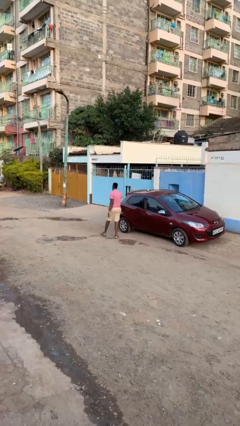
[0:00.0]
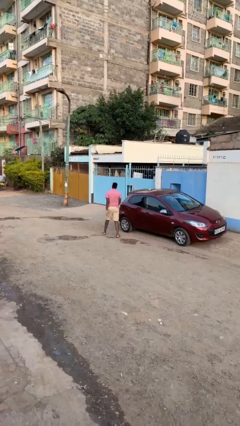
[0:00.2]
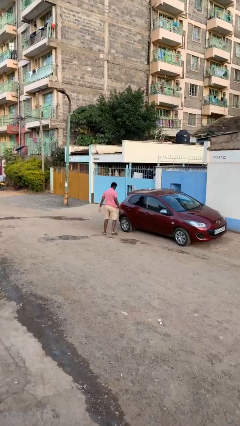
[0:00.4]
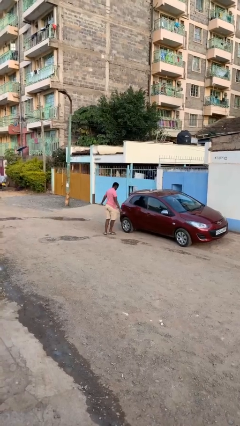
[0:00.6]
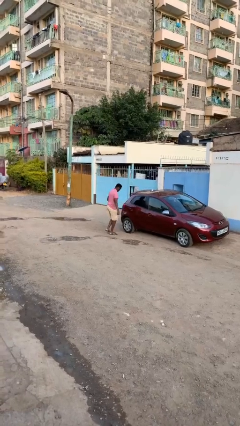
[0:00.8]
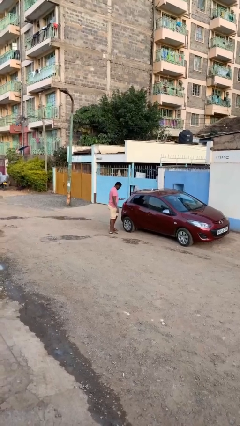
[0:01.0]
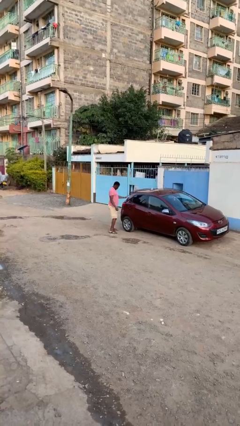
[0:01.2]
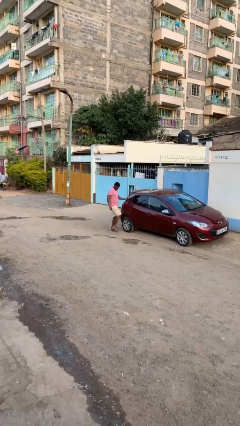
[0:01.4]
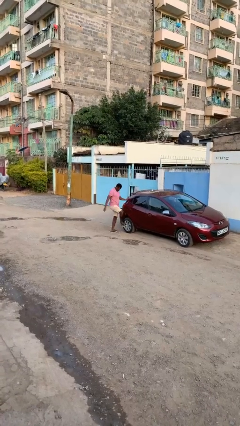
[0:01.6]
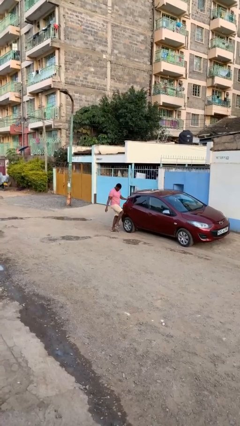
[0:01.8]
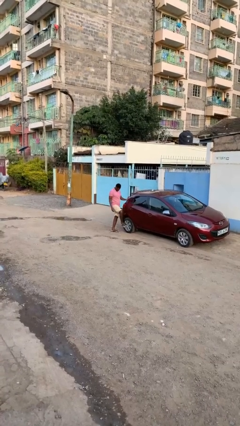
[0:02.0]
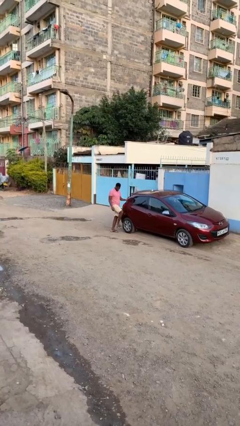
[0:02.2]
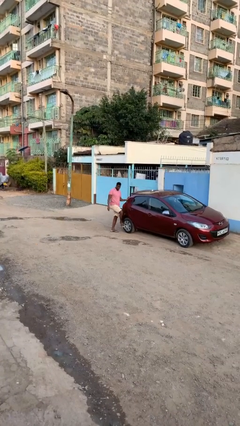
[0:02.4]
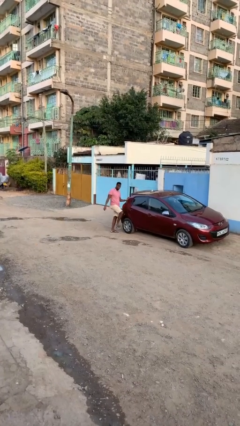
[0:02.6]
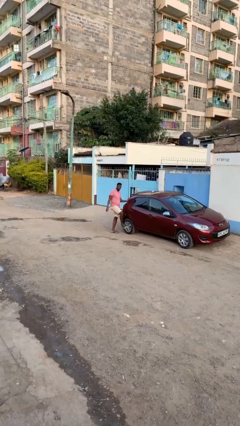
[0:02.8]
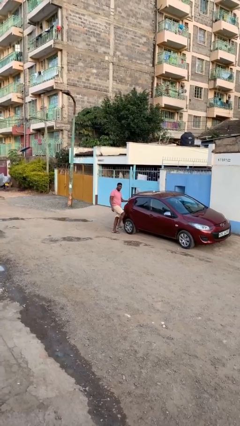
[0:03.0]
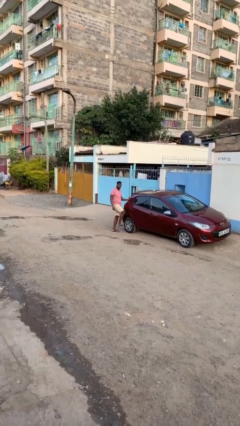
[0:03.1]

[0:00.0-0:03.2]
person kicks car tires

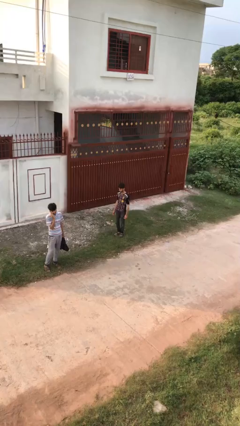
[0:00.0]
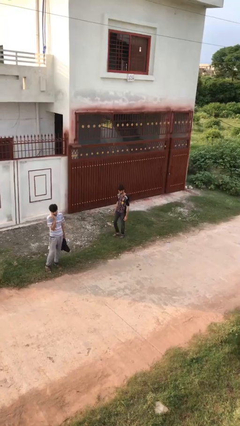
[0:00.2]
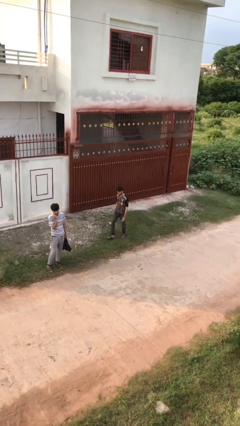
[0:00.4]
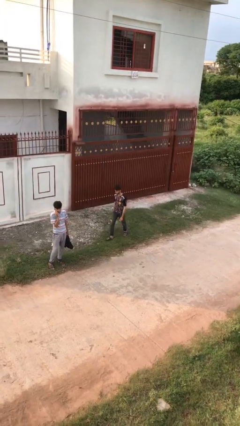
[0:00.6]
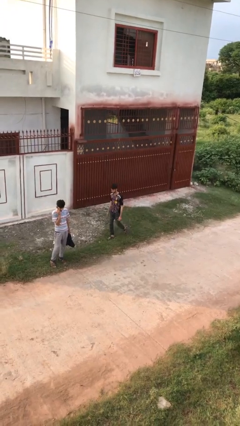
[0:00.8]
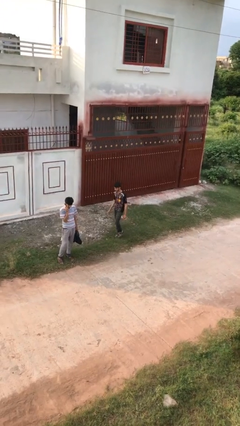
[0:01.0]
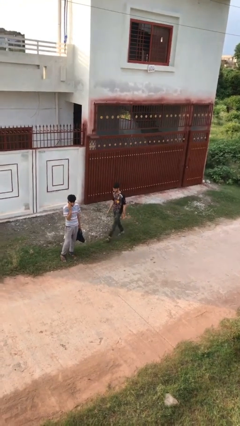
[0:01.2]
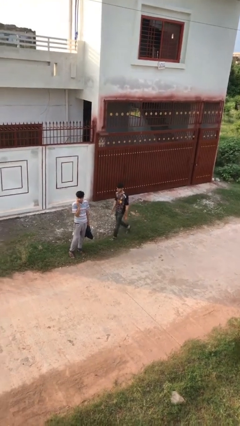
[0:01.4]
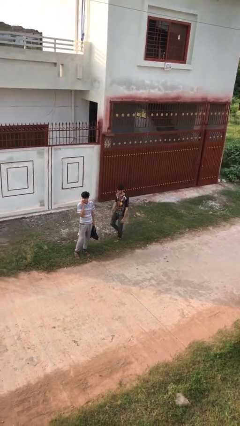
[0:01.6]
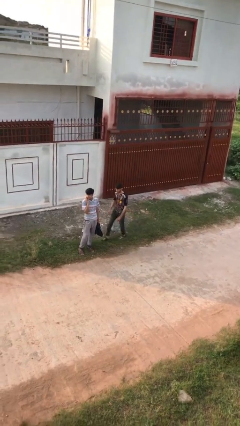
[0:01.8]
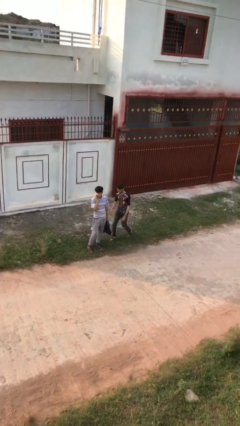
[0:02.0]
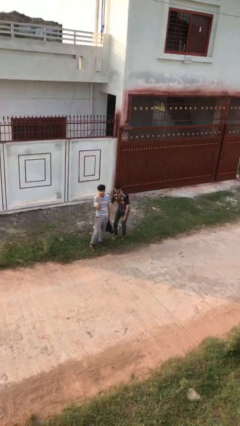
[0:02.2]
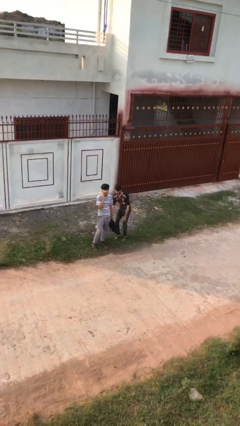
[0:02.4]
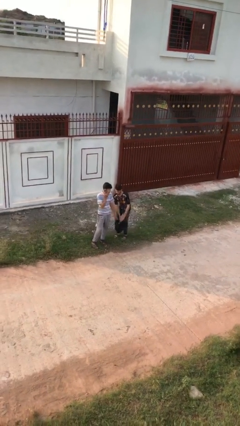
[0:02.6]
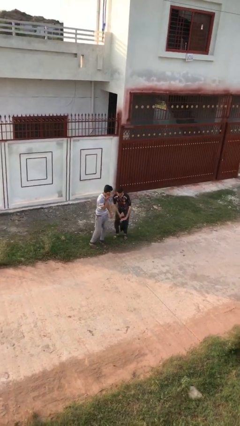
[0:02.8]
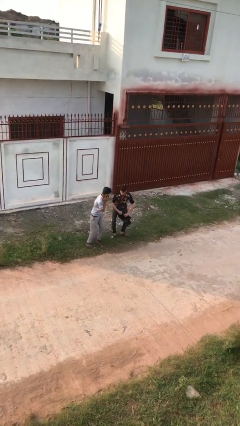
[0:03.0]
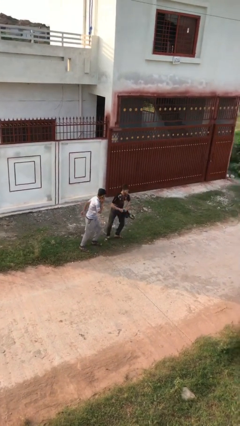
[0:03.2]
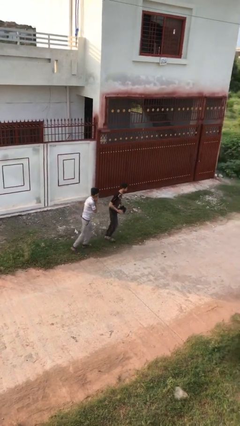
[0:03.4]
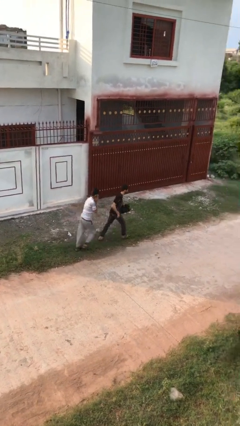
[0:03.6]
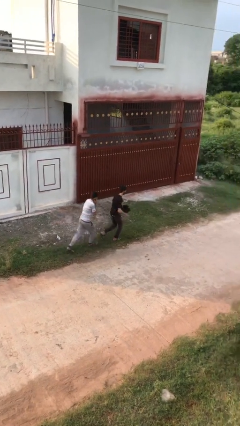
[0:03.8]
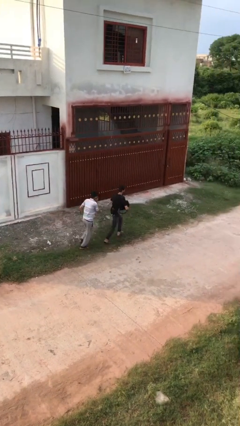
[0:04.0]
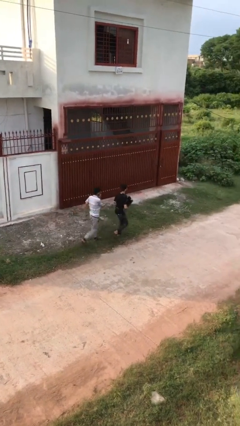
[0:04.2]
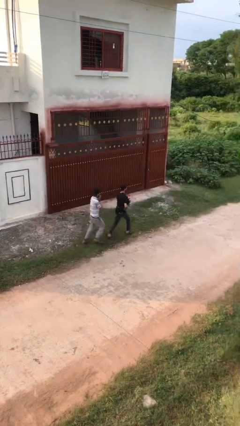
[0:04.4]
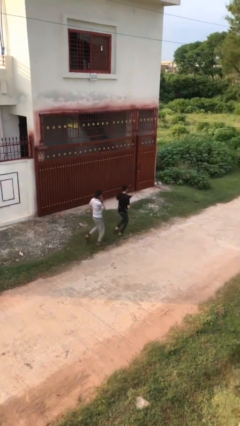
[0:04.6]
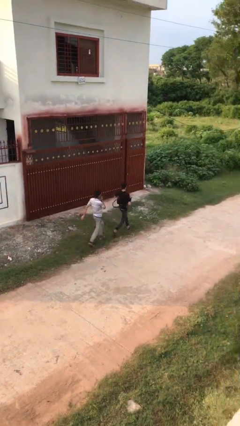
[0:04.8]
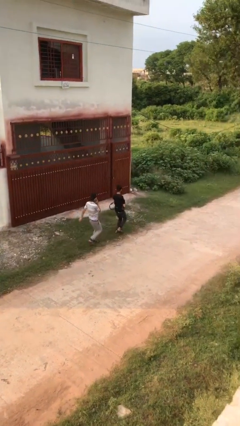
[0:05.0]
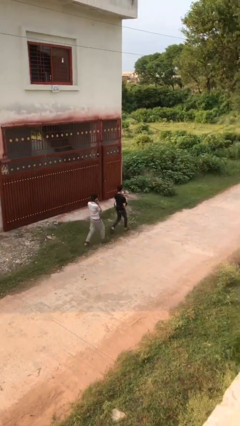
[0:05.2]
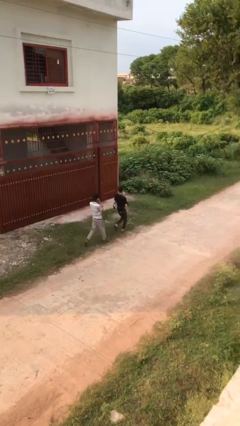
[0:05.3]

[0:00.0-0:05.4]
person steals object from person

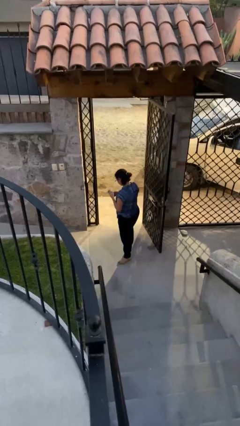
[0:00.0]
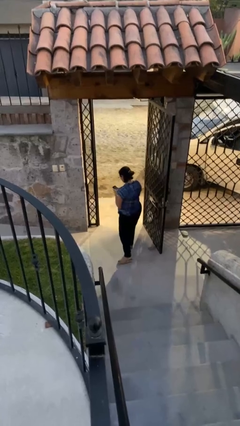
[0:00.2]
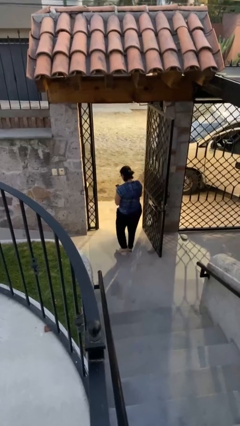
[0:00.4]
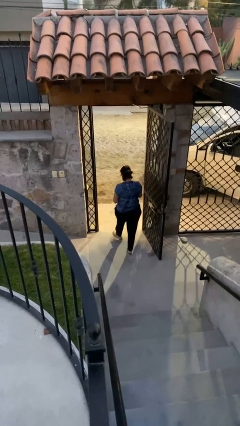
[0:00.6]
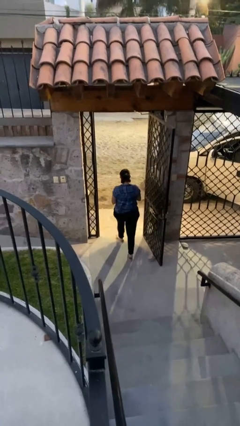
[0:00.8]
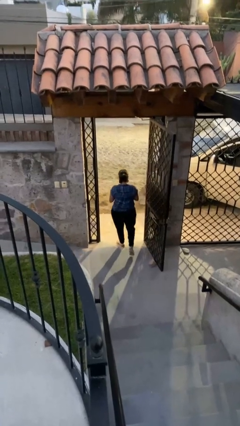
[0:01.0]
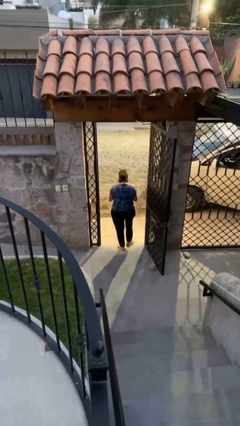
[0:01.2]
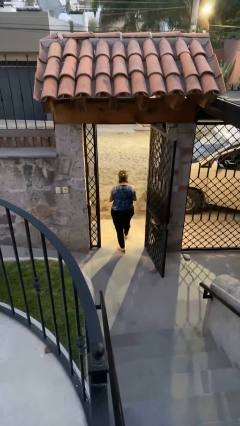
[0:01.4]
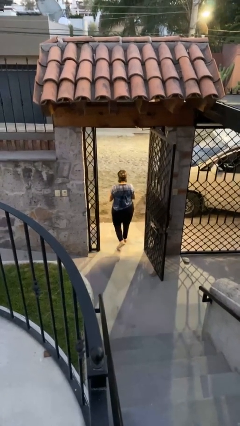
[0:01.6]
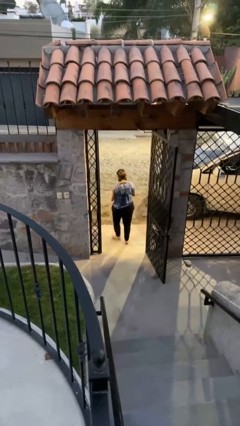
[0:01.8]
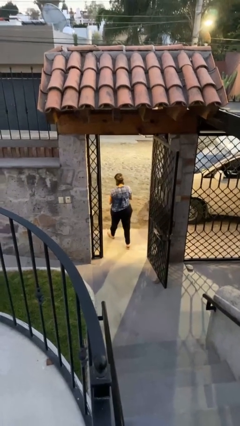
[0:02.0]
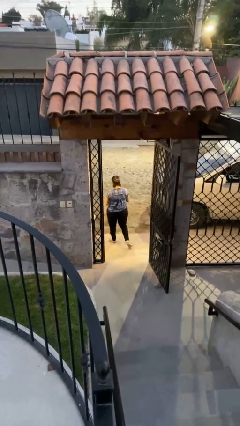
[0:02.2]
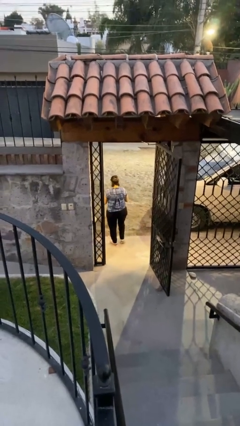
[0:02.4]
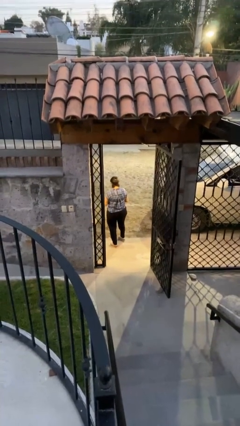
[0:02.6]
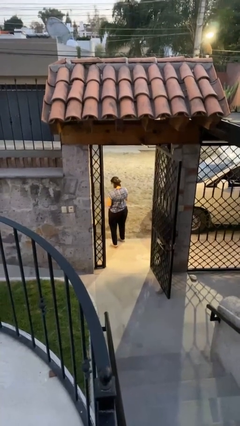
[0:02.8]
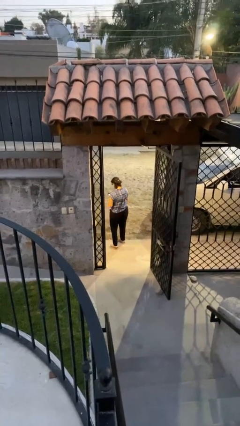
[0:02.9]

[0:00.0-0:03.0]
person exits scene through structure

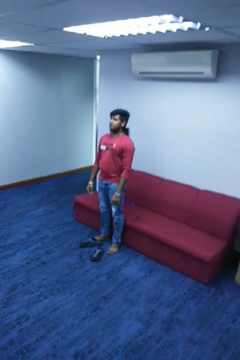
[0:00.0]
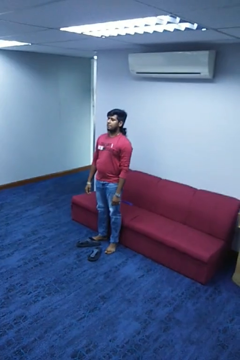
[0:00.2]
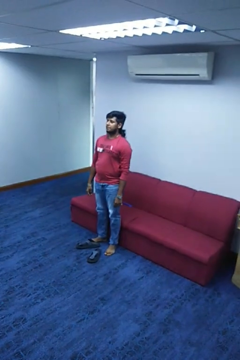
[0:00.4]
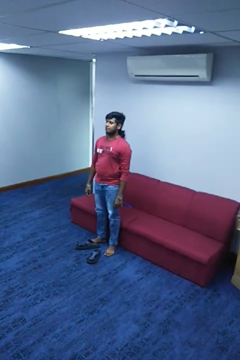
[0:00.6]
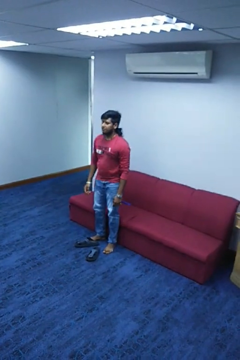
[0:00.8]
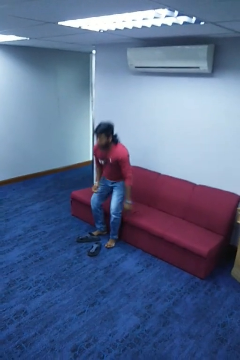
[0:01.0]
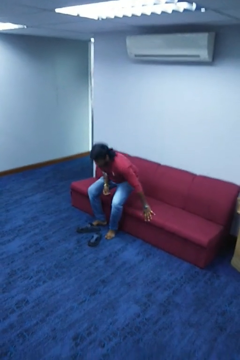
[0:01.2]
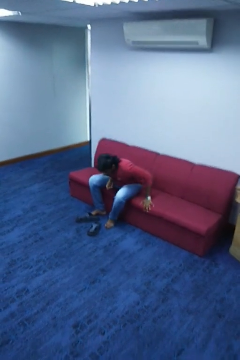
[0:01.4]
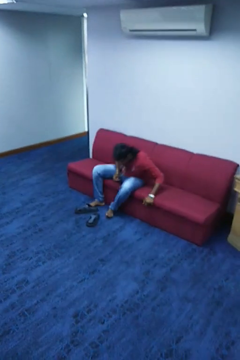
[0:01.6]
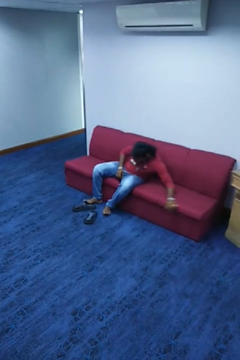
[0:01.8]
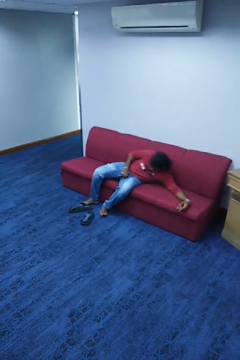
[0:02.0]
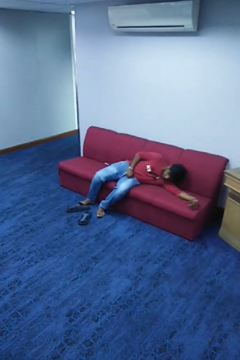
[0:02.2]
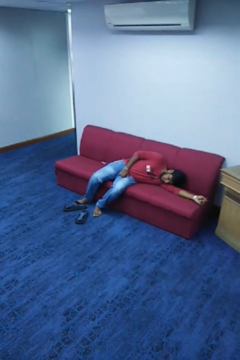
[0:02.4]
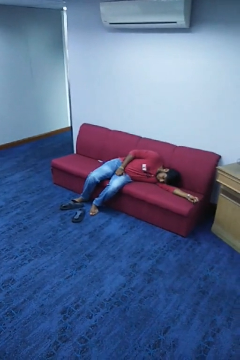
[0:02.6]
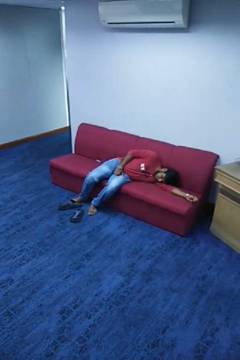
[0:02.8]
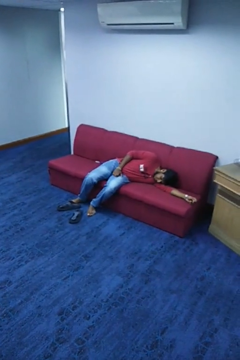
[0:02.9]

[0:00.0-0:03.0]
person lies down on couch

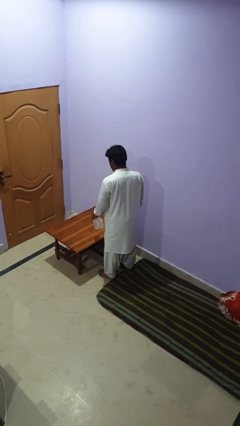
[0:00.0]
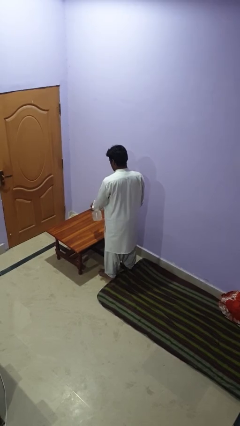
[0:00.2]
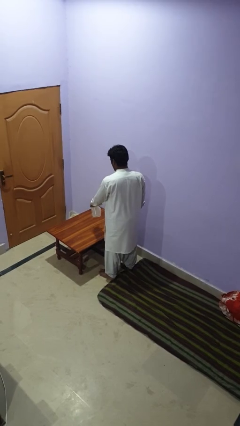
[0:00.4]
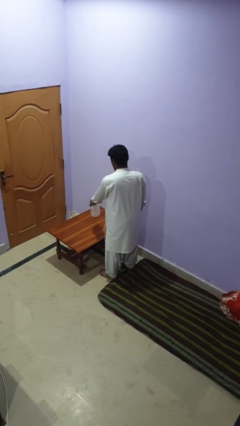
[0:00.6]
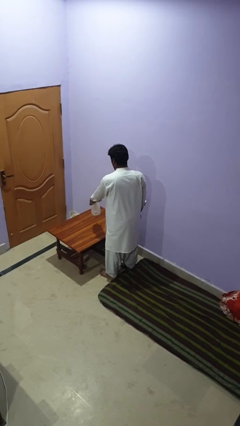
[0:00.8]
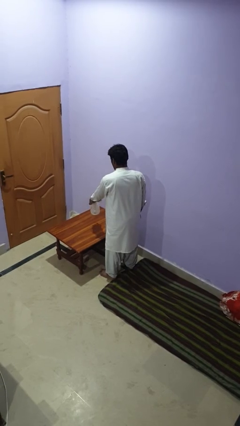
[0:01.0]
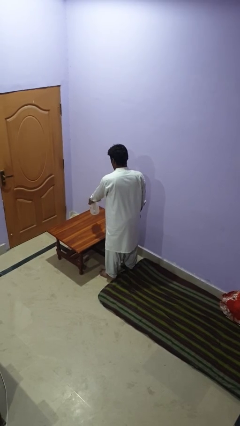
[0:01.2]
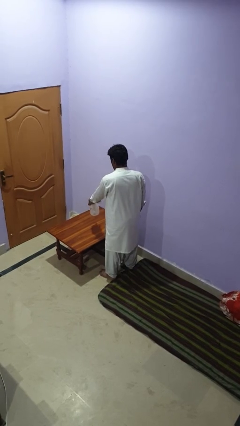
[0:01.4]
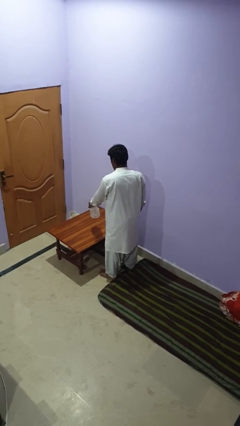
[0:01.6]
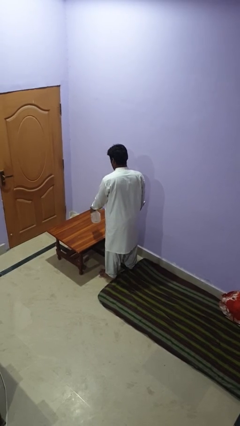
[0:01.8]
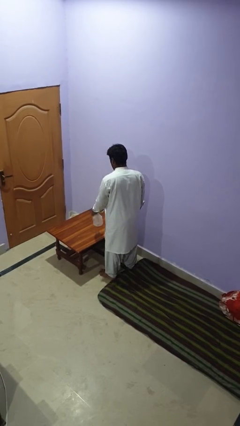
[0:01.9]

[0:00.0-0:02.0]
person sprays from bottle

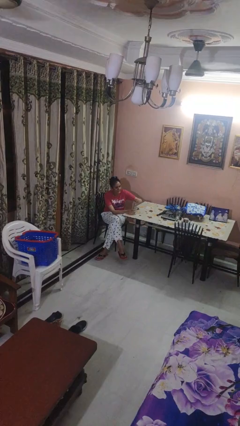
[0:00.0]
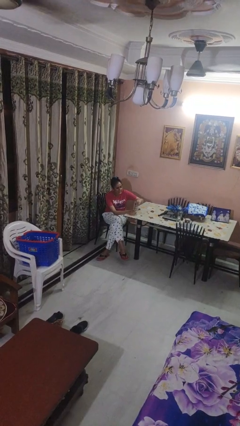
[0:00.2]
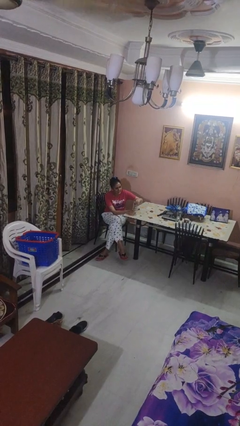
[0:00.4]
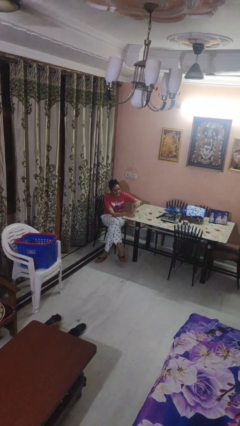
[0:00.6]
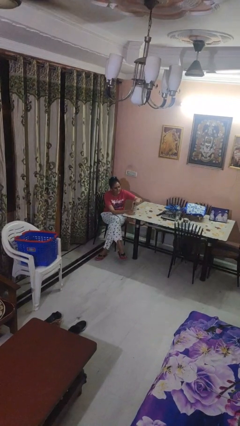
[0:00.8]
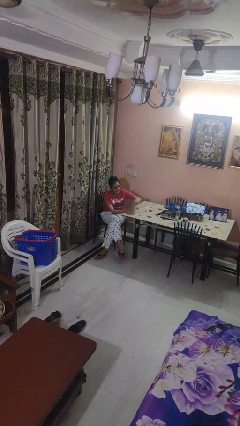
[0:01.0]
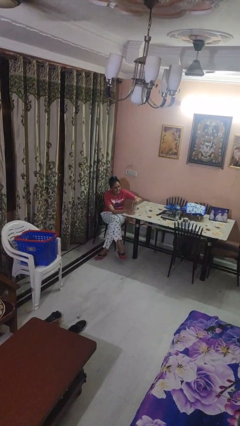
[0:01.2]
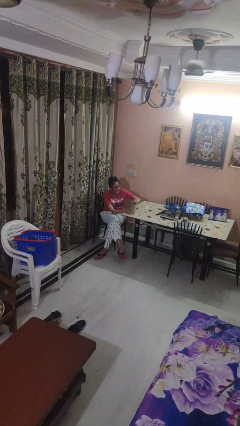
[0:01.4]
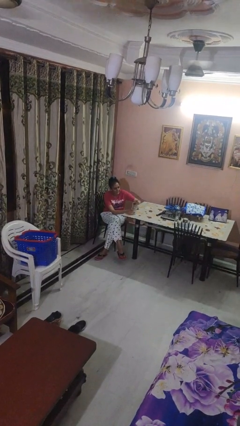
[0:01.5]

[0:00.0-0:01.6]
person screws lid to bottle
